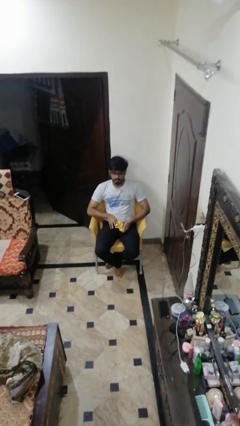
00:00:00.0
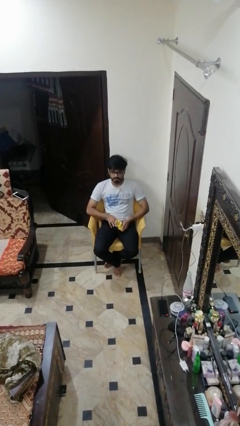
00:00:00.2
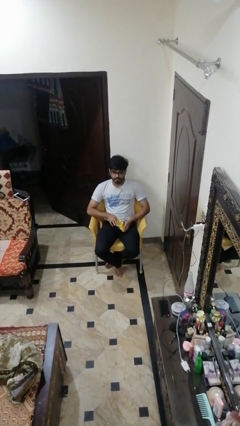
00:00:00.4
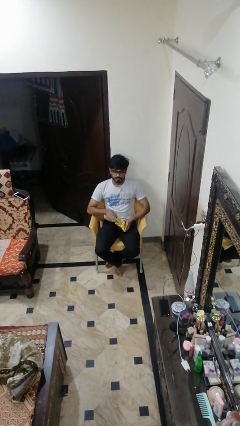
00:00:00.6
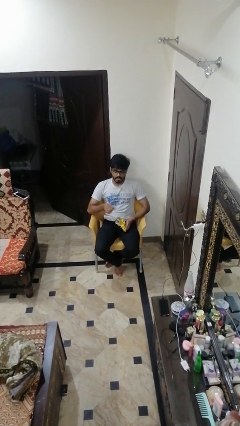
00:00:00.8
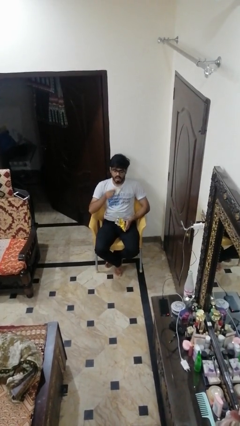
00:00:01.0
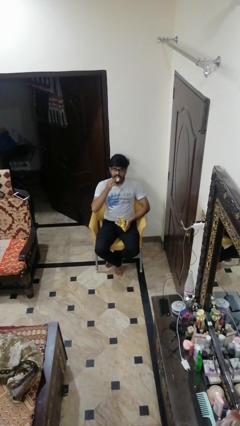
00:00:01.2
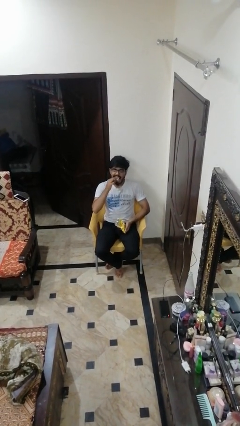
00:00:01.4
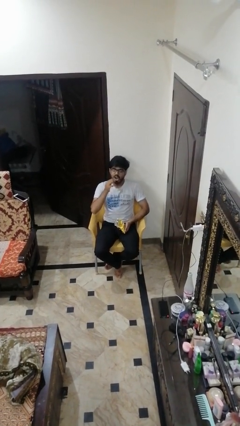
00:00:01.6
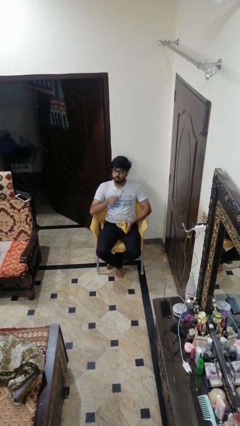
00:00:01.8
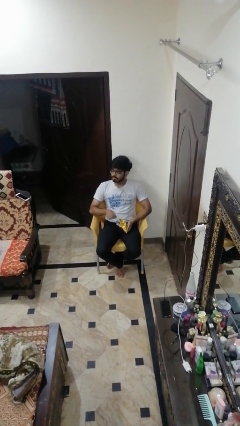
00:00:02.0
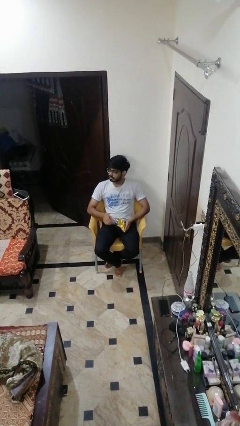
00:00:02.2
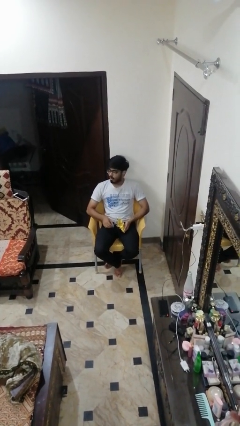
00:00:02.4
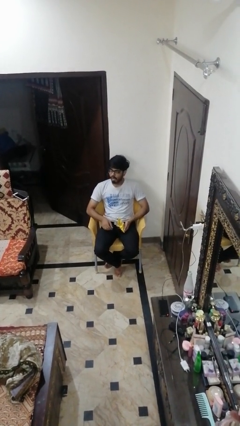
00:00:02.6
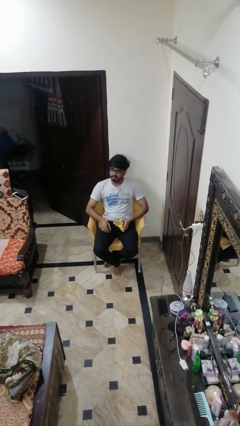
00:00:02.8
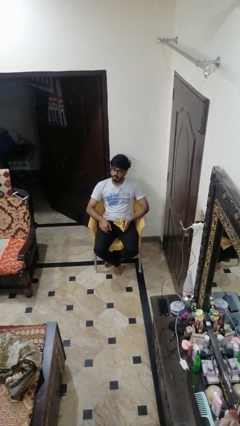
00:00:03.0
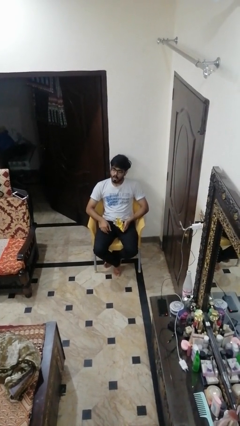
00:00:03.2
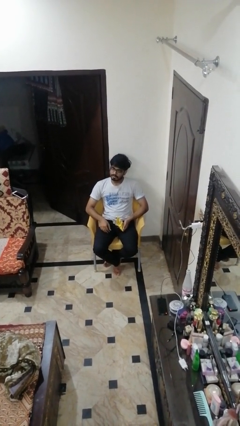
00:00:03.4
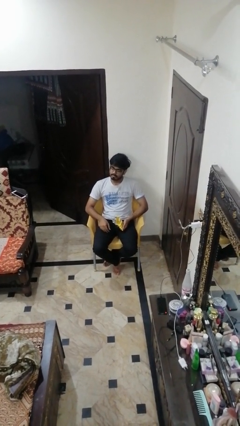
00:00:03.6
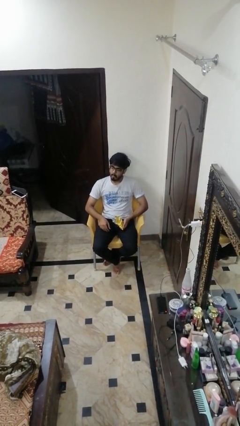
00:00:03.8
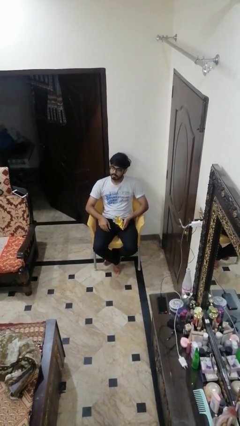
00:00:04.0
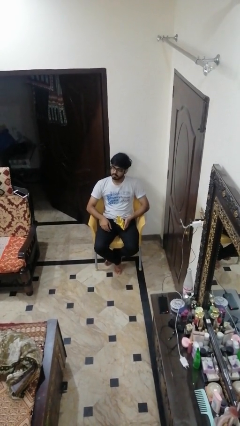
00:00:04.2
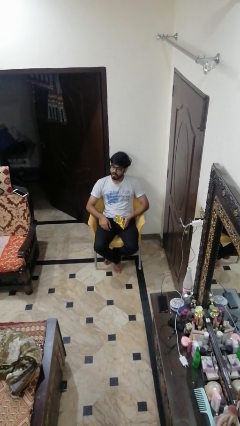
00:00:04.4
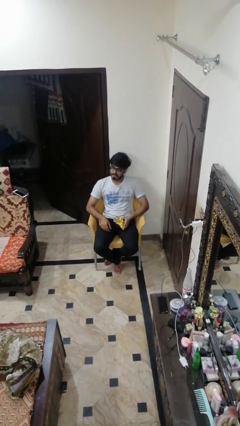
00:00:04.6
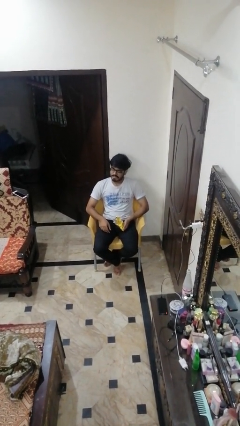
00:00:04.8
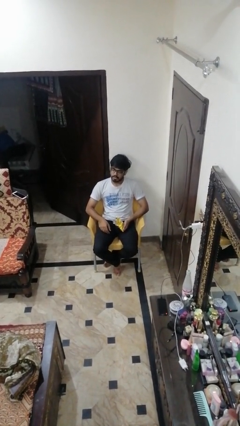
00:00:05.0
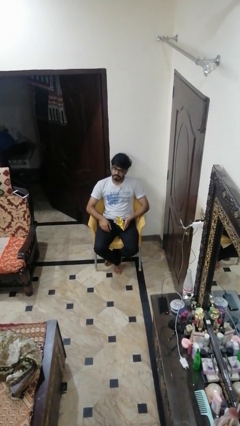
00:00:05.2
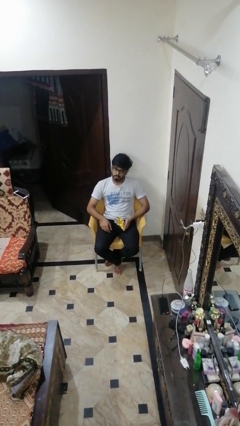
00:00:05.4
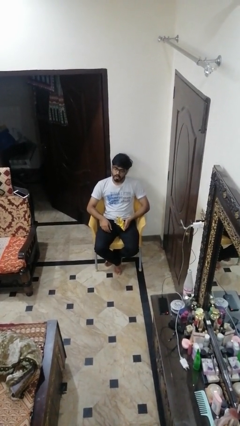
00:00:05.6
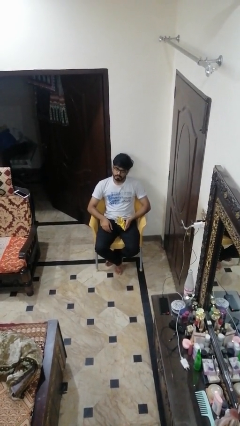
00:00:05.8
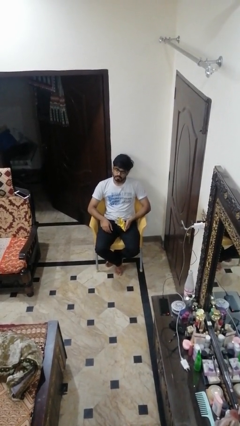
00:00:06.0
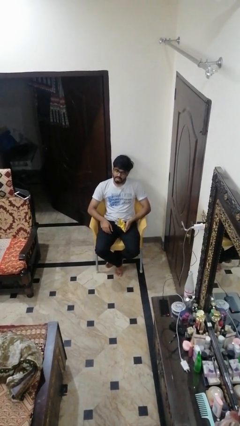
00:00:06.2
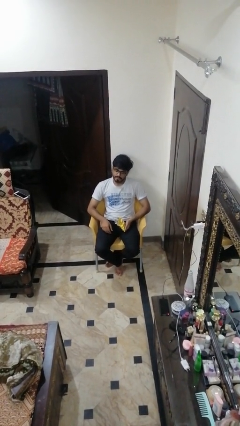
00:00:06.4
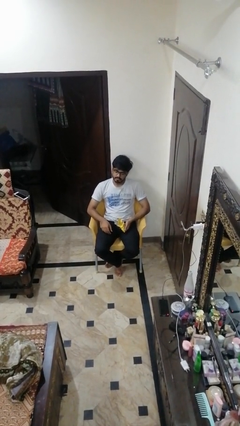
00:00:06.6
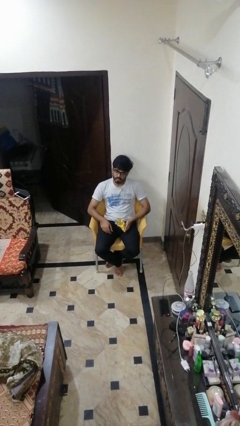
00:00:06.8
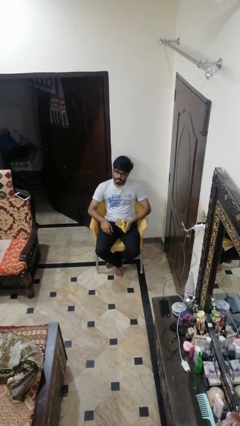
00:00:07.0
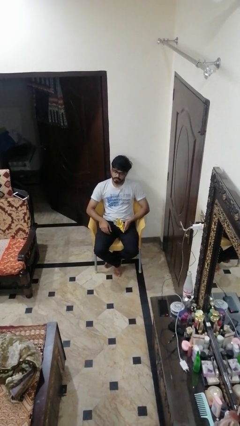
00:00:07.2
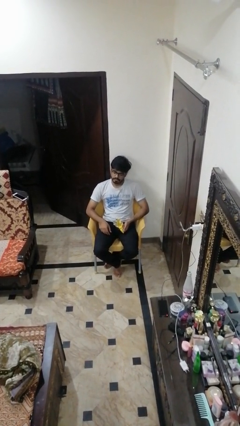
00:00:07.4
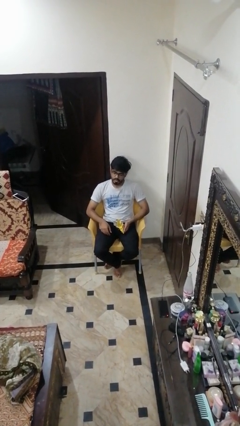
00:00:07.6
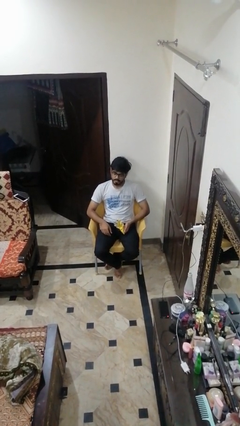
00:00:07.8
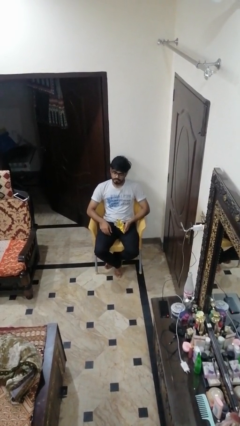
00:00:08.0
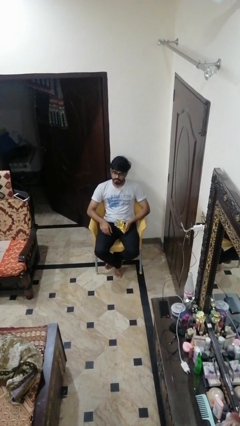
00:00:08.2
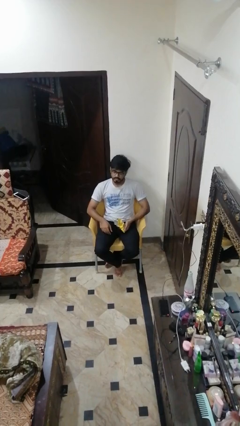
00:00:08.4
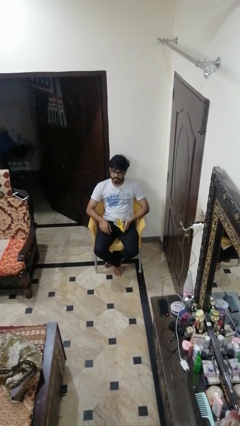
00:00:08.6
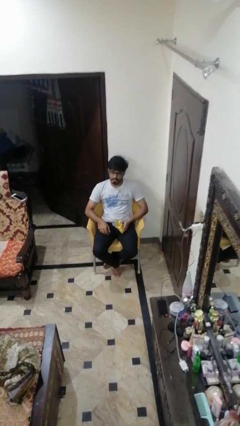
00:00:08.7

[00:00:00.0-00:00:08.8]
person eats snack from bag

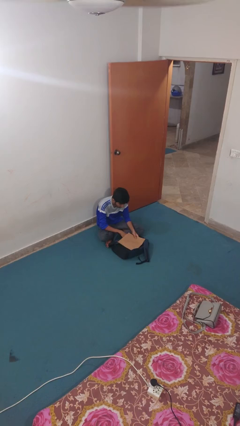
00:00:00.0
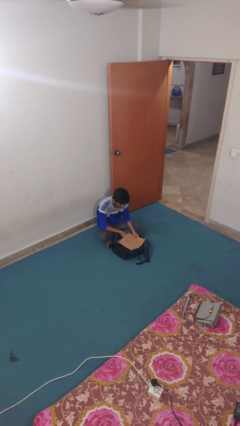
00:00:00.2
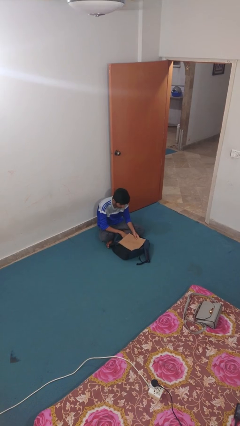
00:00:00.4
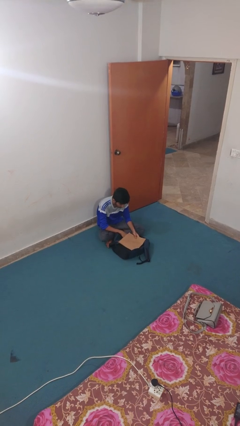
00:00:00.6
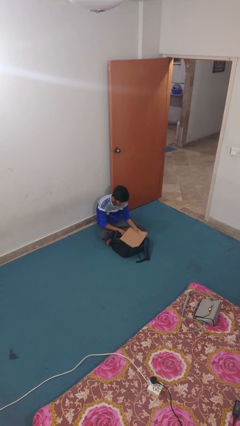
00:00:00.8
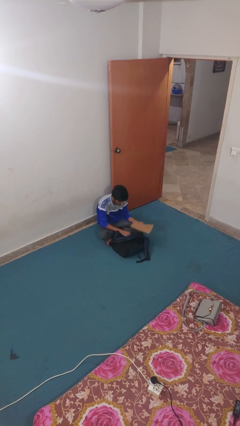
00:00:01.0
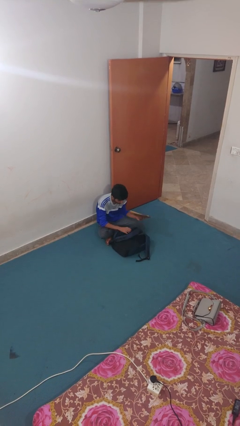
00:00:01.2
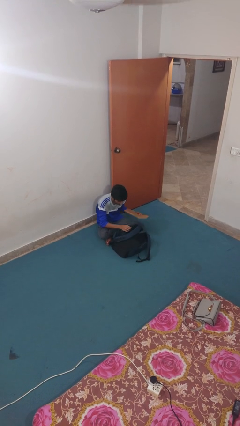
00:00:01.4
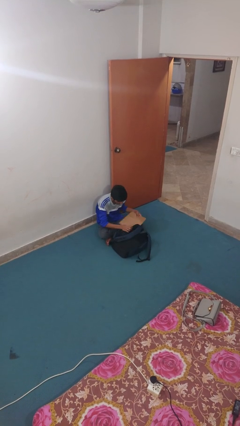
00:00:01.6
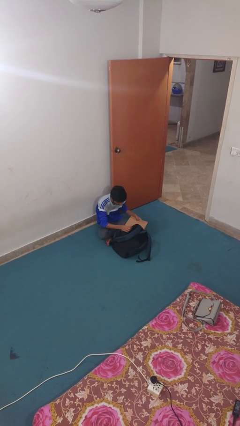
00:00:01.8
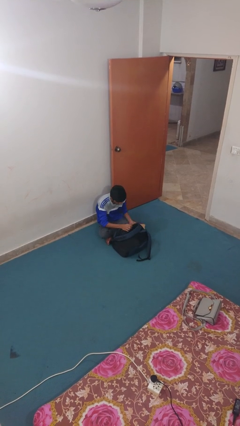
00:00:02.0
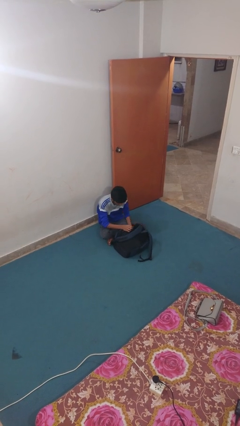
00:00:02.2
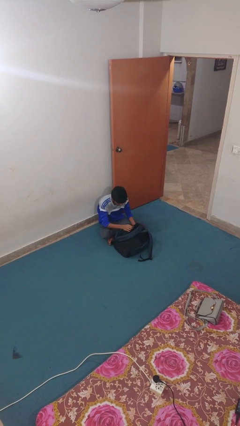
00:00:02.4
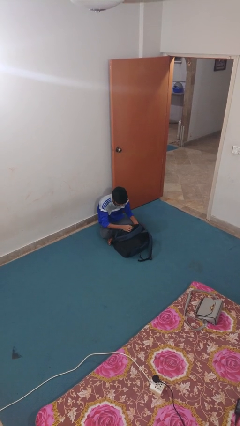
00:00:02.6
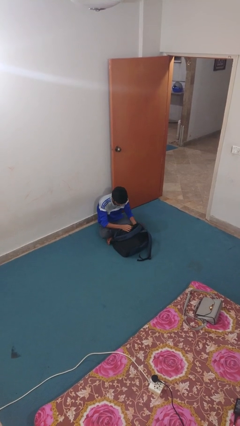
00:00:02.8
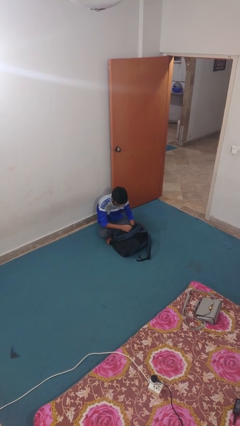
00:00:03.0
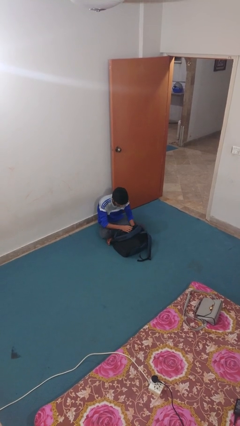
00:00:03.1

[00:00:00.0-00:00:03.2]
person puts object into backpack

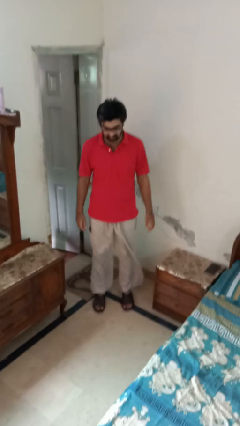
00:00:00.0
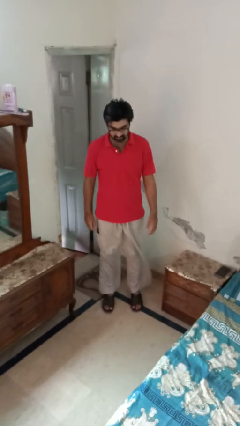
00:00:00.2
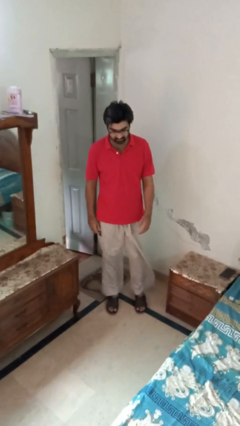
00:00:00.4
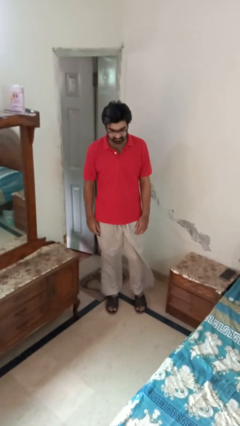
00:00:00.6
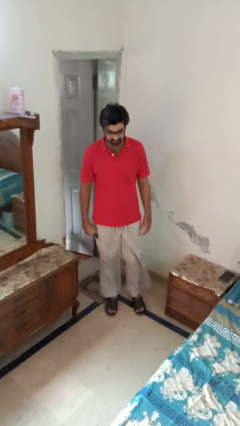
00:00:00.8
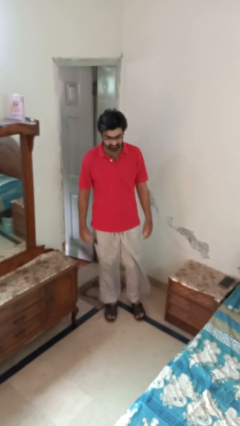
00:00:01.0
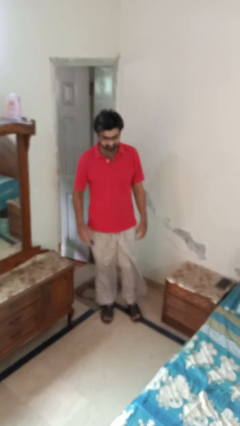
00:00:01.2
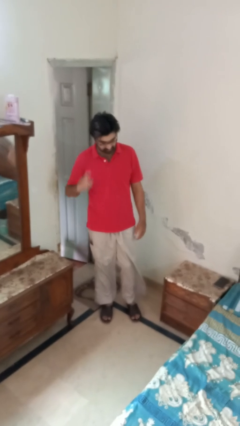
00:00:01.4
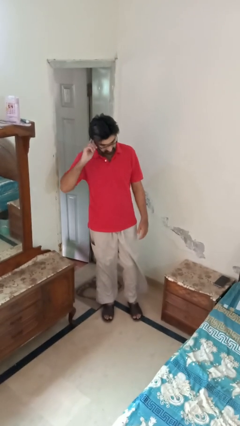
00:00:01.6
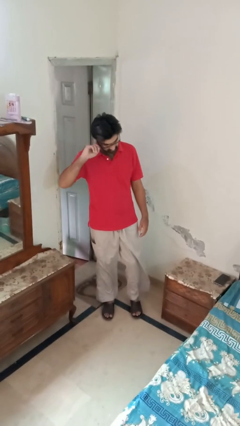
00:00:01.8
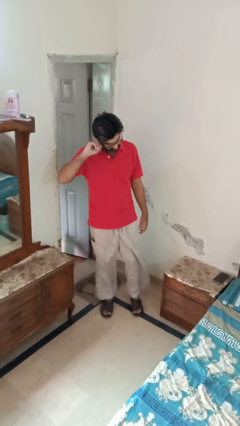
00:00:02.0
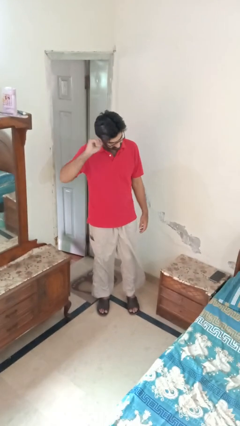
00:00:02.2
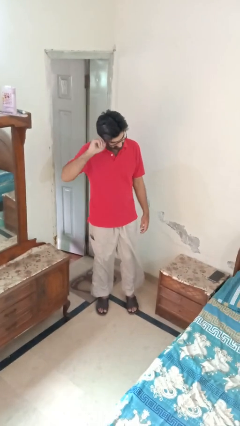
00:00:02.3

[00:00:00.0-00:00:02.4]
person touches earlobe

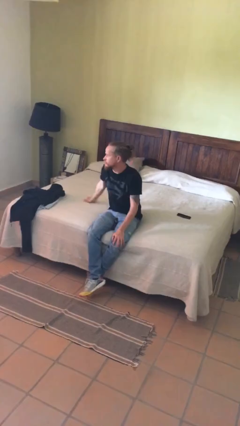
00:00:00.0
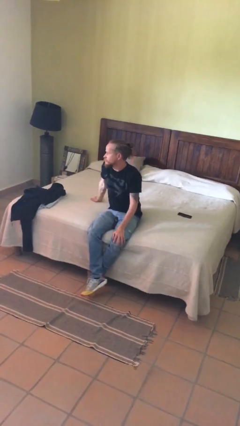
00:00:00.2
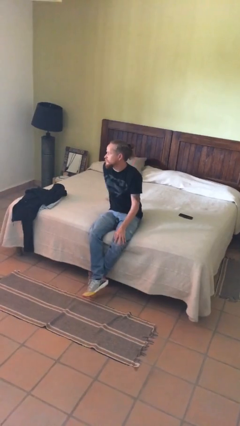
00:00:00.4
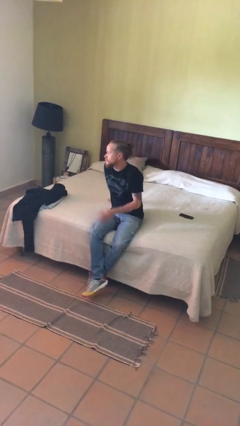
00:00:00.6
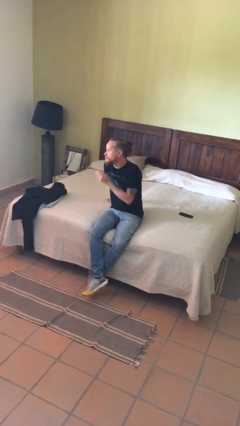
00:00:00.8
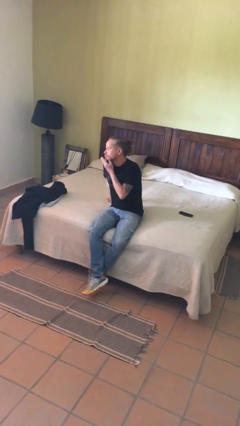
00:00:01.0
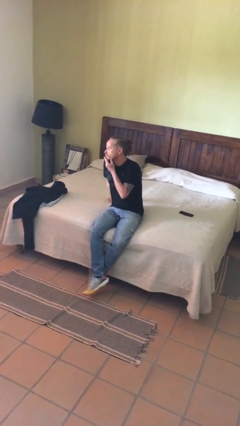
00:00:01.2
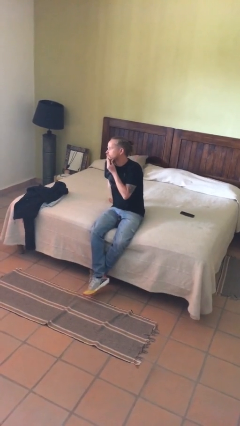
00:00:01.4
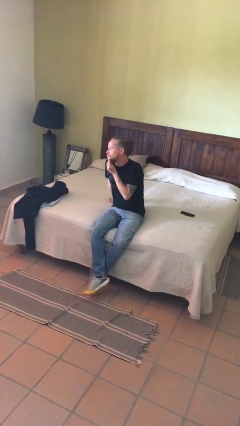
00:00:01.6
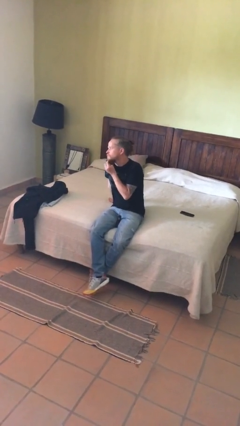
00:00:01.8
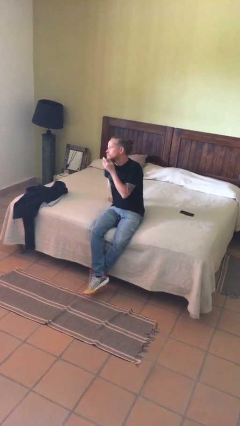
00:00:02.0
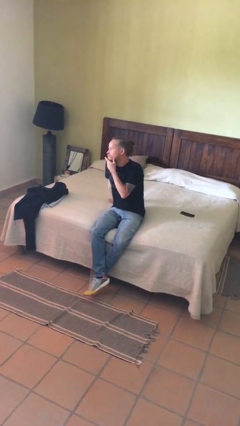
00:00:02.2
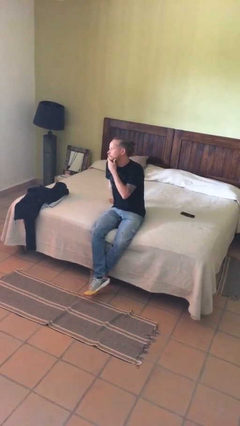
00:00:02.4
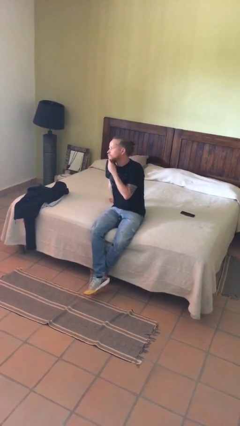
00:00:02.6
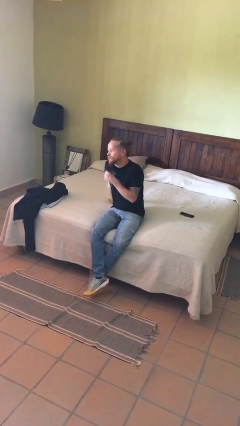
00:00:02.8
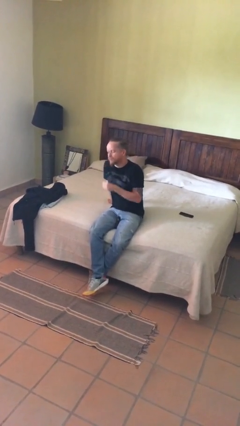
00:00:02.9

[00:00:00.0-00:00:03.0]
person strokes chin

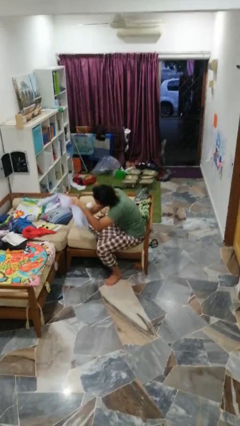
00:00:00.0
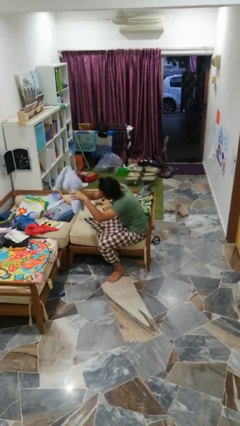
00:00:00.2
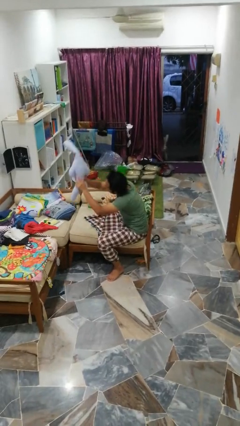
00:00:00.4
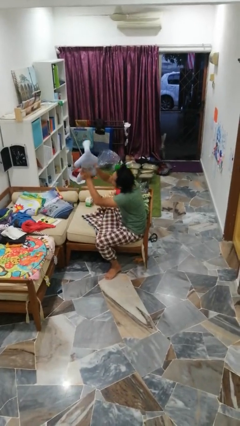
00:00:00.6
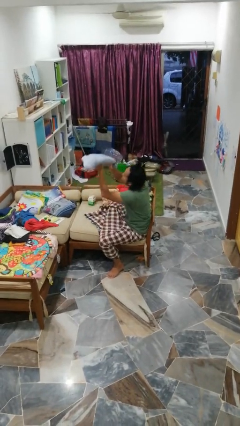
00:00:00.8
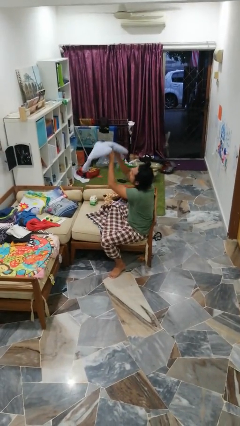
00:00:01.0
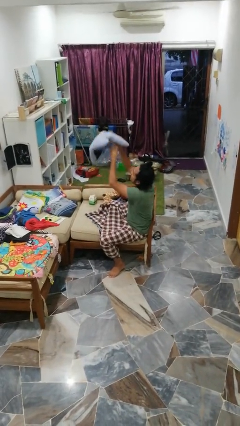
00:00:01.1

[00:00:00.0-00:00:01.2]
person catches dropped object
